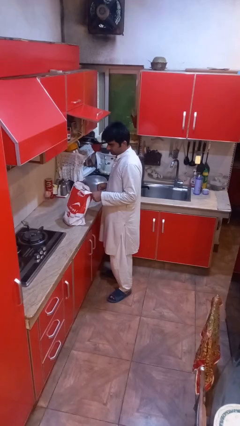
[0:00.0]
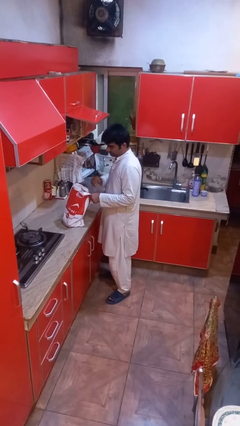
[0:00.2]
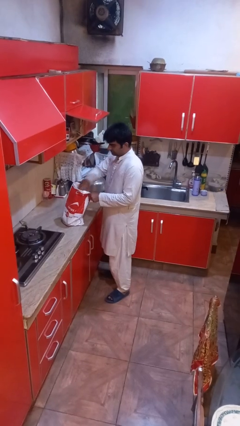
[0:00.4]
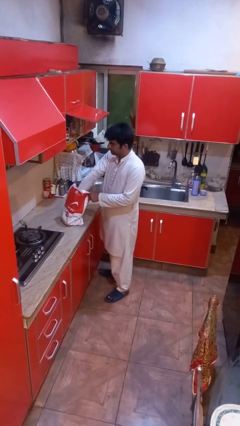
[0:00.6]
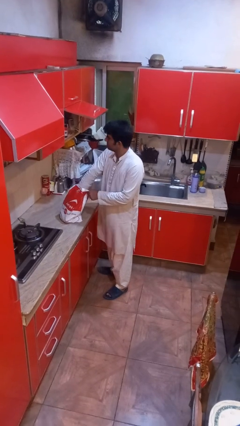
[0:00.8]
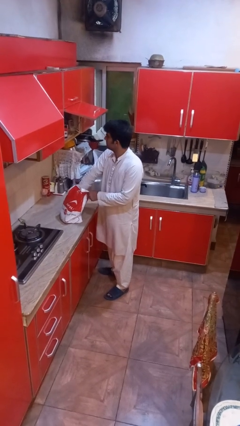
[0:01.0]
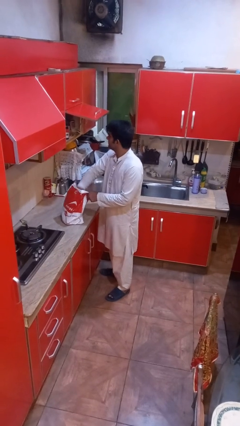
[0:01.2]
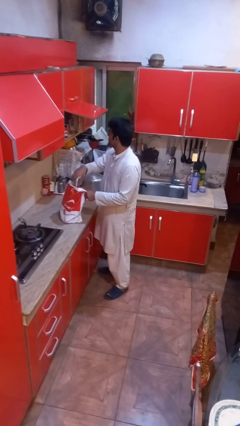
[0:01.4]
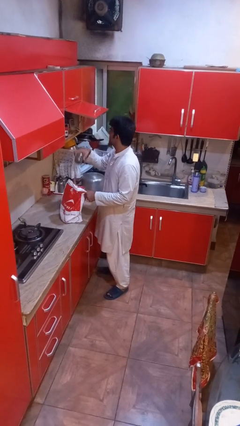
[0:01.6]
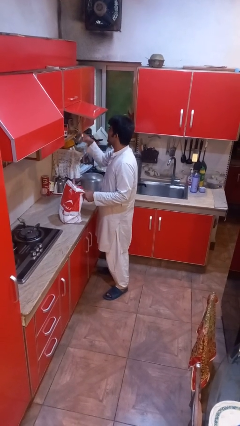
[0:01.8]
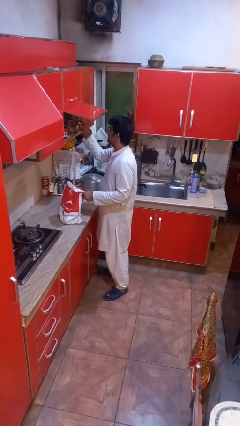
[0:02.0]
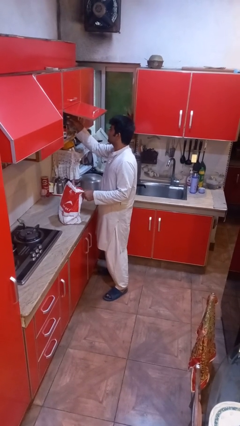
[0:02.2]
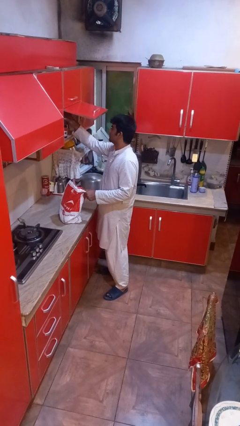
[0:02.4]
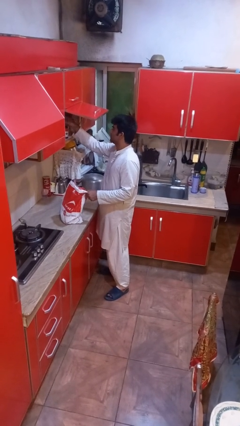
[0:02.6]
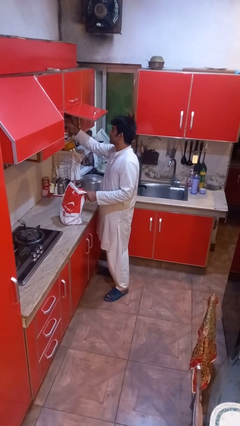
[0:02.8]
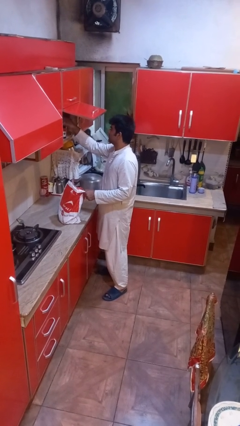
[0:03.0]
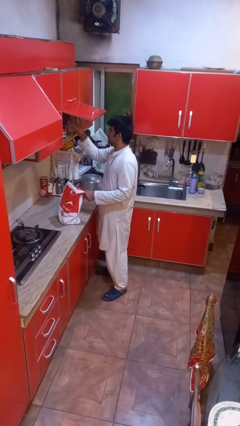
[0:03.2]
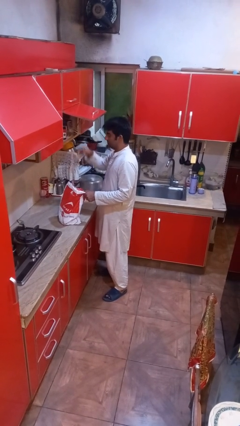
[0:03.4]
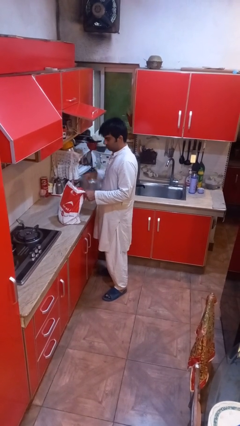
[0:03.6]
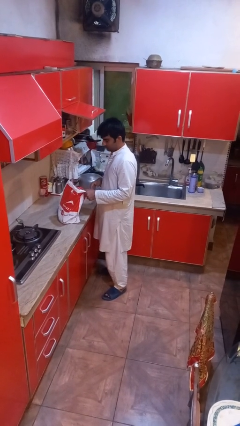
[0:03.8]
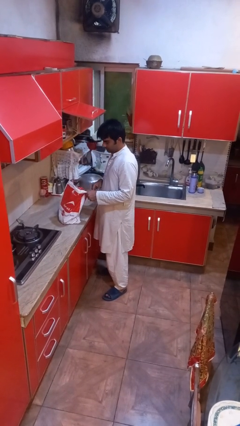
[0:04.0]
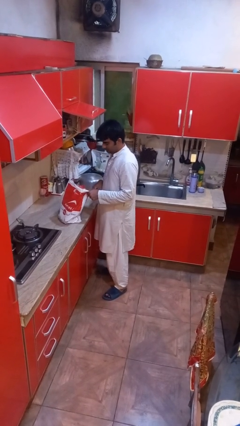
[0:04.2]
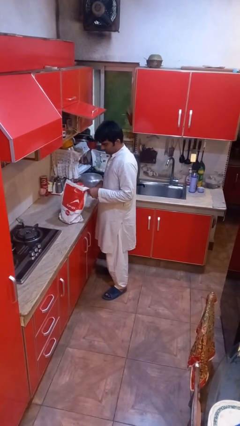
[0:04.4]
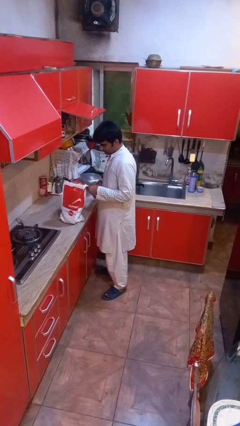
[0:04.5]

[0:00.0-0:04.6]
person loads groceries into cabinet

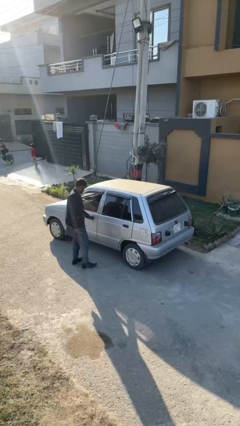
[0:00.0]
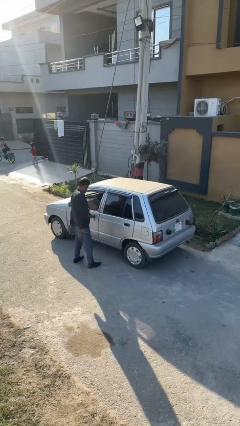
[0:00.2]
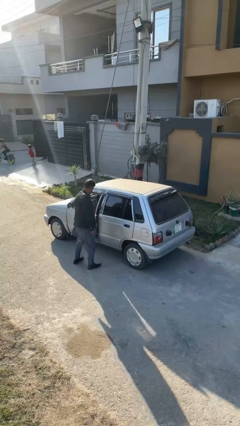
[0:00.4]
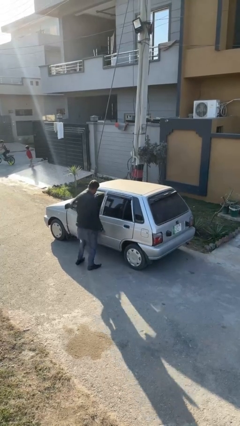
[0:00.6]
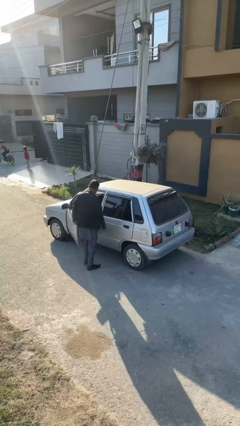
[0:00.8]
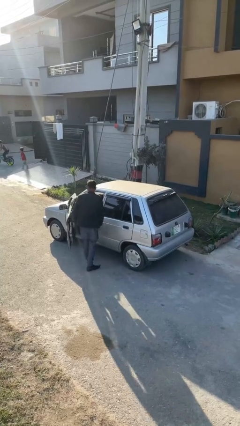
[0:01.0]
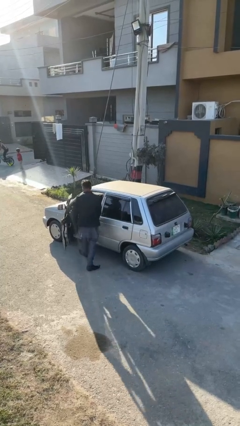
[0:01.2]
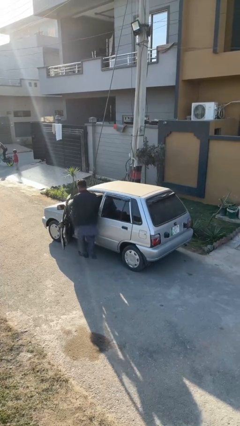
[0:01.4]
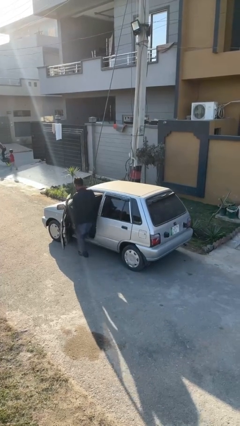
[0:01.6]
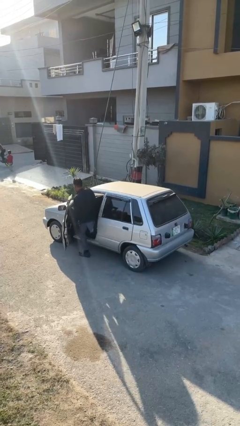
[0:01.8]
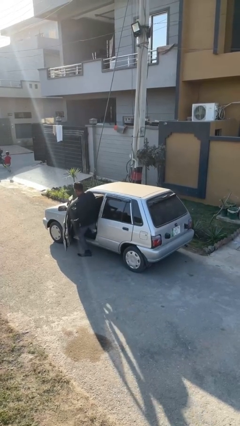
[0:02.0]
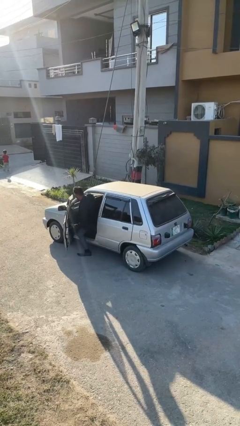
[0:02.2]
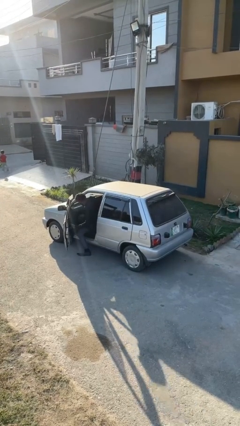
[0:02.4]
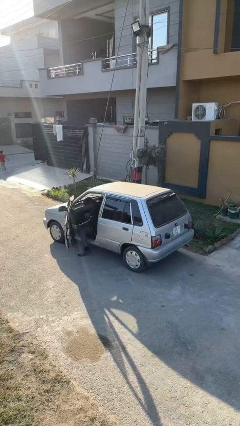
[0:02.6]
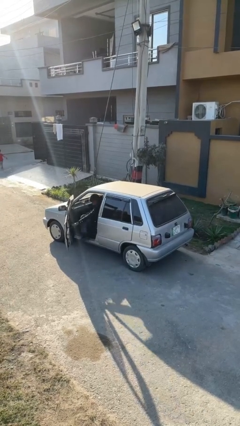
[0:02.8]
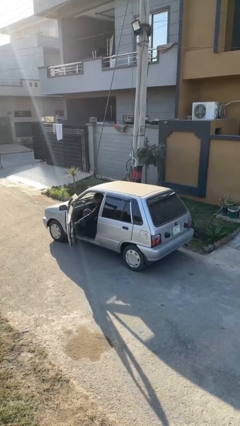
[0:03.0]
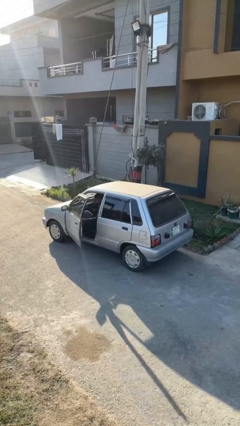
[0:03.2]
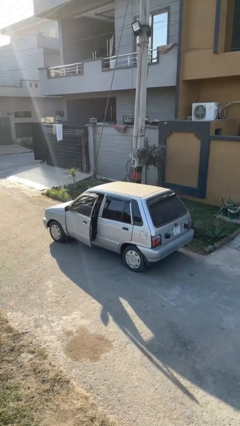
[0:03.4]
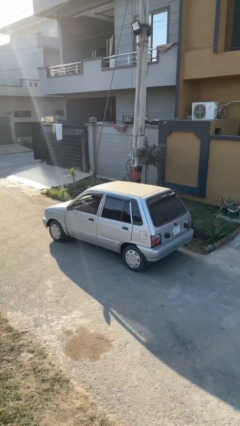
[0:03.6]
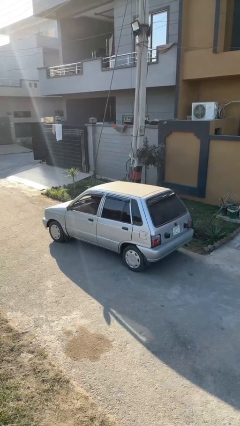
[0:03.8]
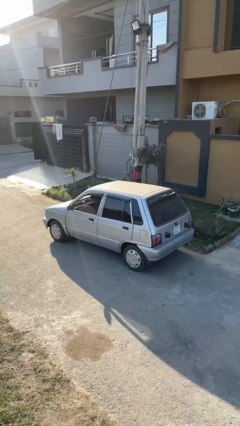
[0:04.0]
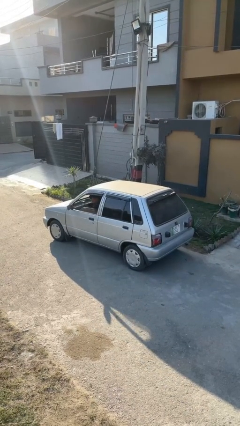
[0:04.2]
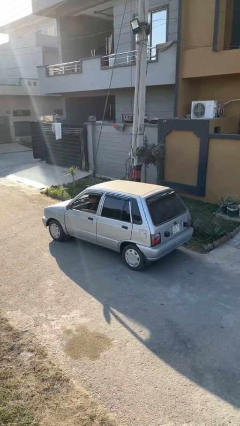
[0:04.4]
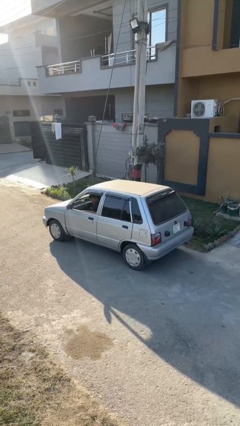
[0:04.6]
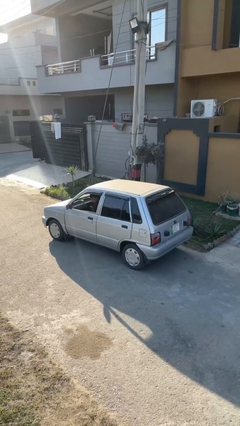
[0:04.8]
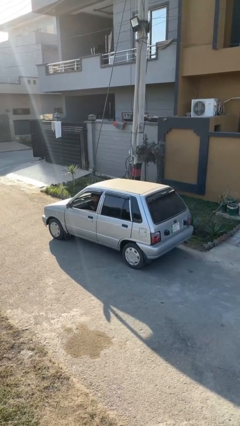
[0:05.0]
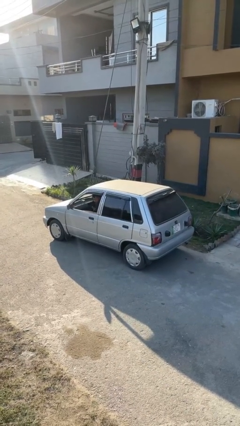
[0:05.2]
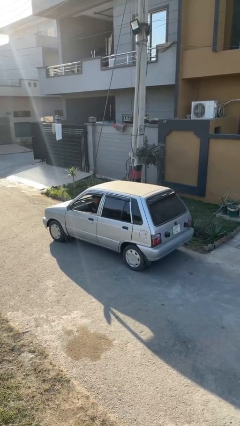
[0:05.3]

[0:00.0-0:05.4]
car picks up person

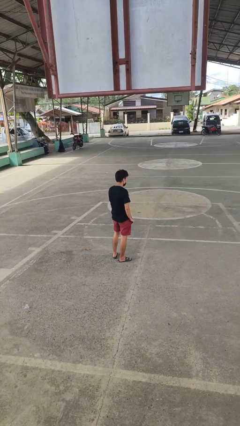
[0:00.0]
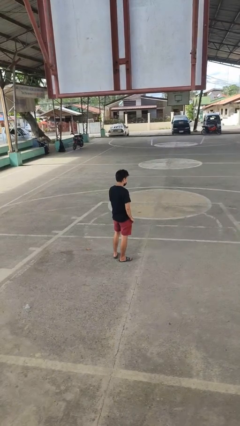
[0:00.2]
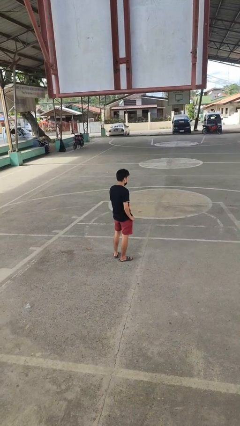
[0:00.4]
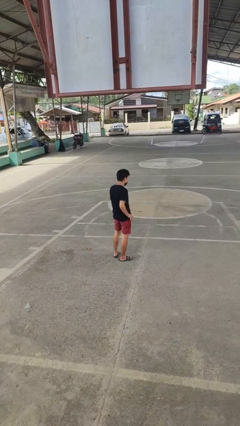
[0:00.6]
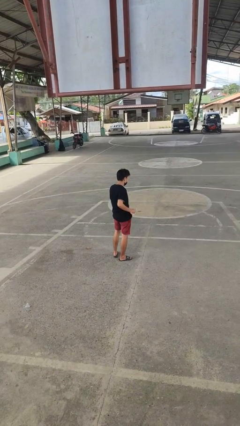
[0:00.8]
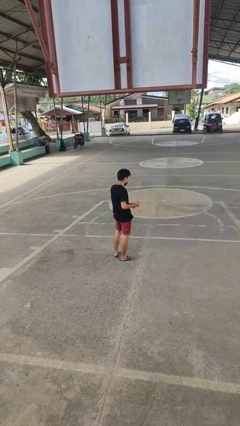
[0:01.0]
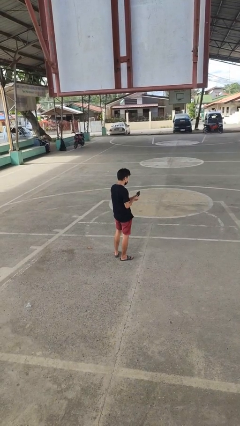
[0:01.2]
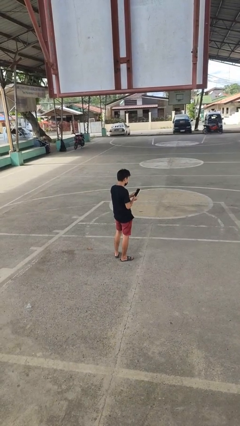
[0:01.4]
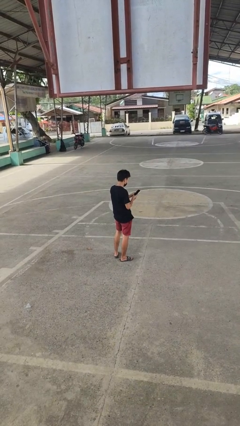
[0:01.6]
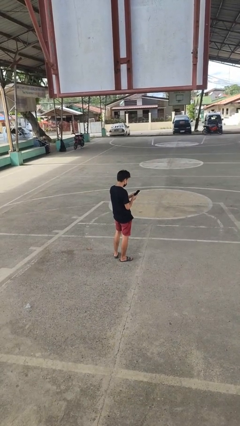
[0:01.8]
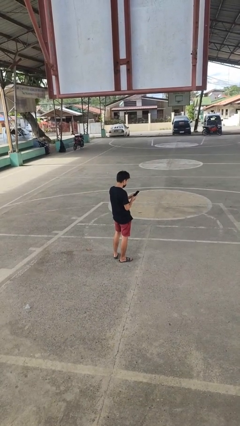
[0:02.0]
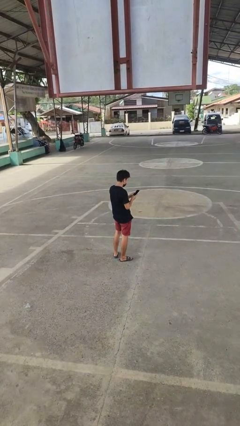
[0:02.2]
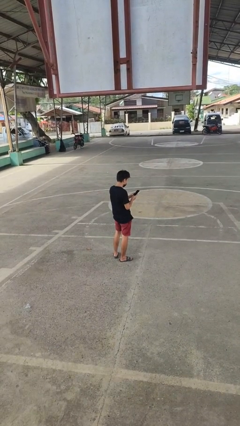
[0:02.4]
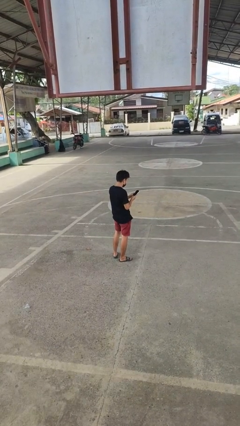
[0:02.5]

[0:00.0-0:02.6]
person takes phone from pocket

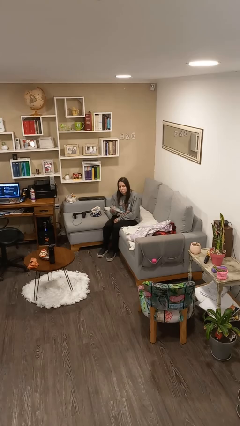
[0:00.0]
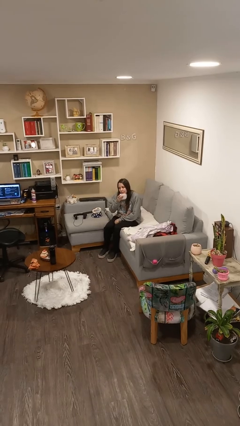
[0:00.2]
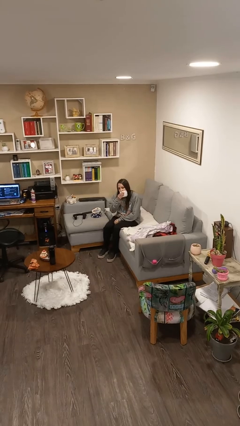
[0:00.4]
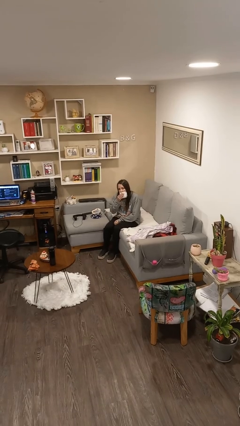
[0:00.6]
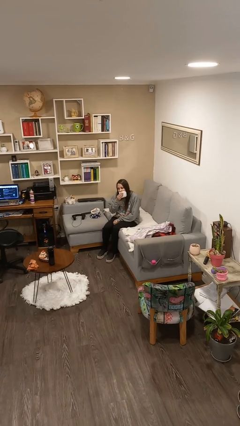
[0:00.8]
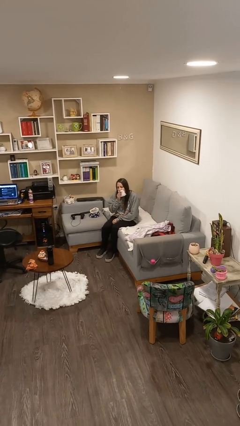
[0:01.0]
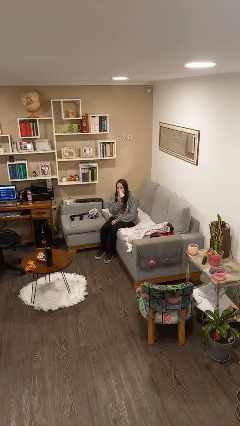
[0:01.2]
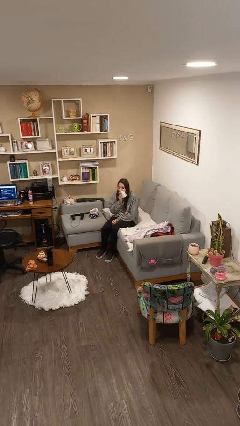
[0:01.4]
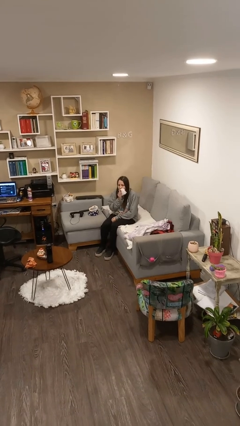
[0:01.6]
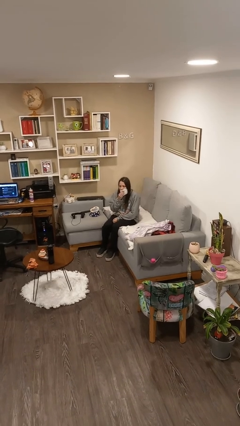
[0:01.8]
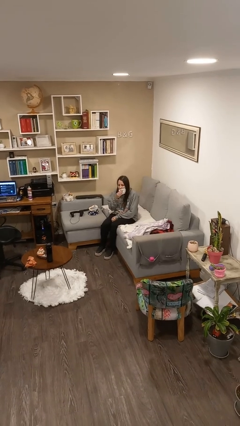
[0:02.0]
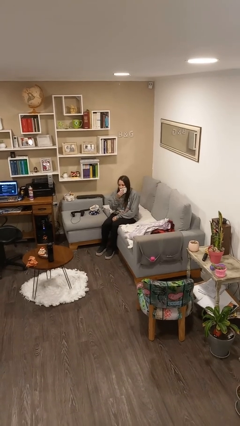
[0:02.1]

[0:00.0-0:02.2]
person wipes mouth with napkin

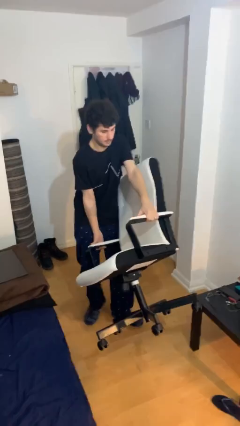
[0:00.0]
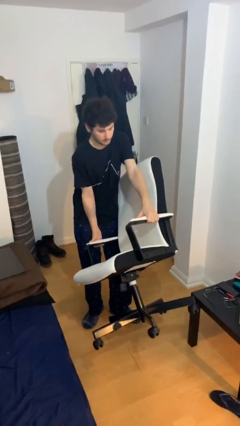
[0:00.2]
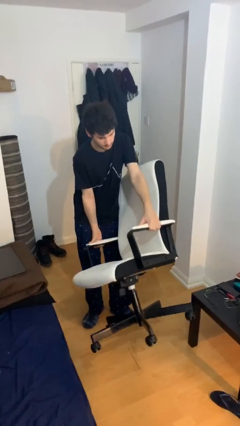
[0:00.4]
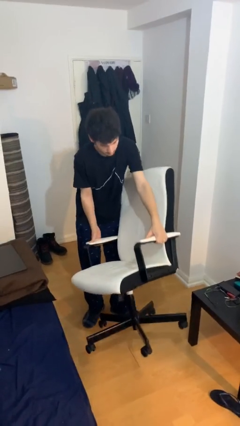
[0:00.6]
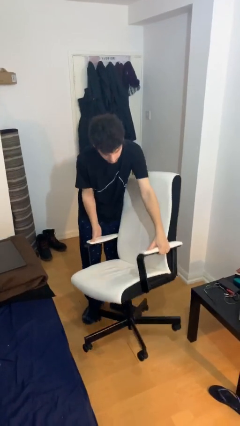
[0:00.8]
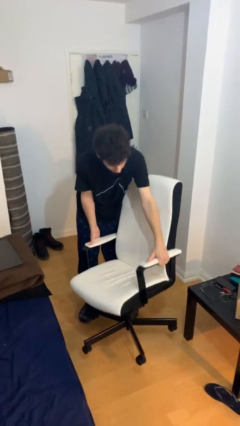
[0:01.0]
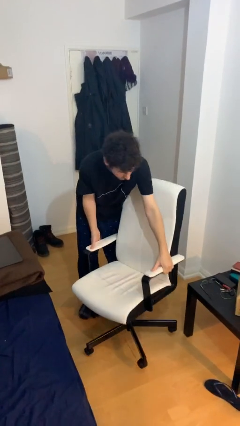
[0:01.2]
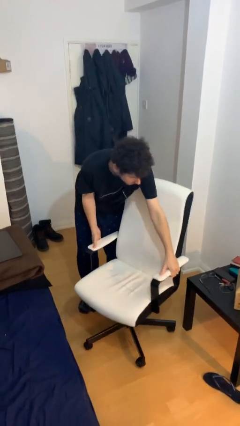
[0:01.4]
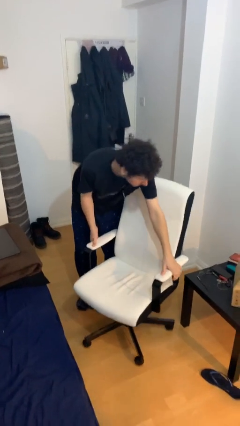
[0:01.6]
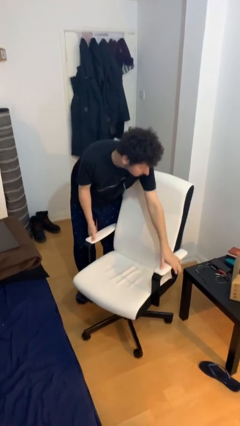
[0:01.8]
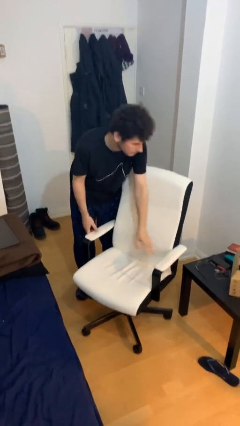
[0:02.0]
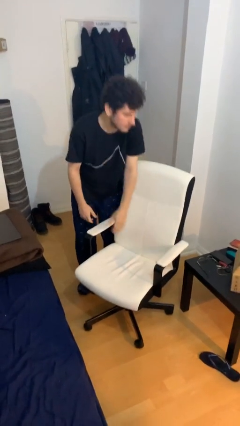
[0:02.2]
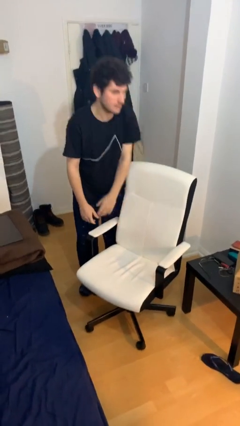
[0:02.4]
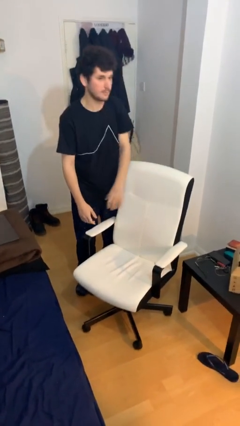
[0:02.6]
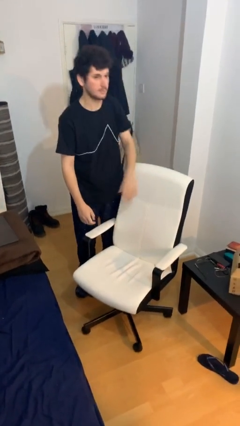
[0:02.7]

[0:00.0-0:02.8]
person puts down object on floor

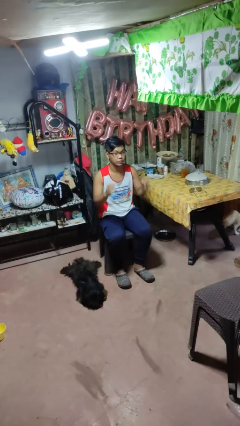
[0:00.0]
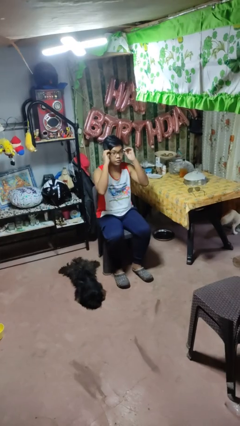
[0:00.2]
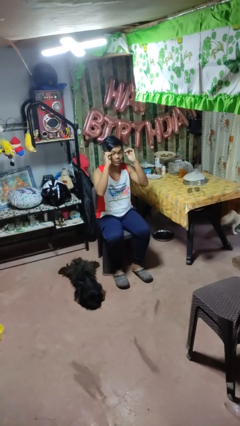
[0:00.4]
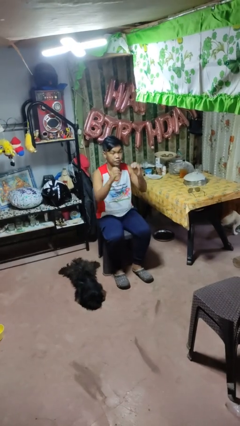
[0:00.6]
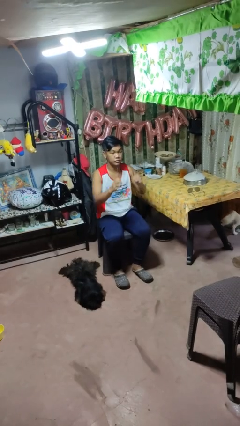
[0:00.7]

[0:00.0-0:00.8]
person takes off glasses
